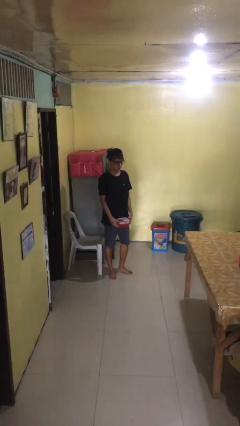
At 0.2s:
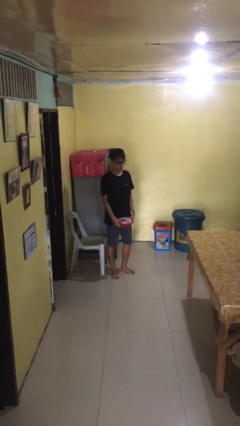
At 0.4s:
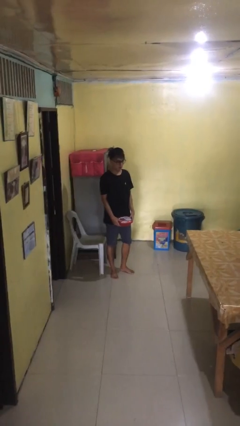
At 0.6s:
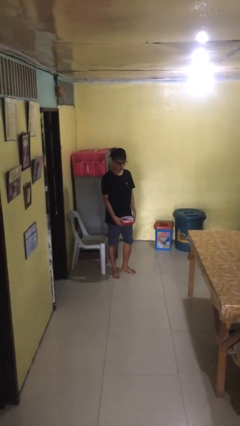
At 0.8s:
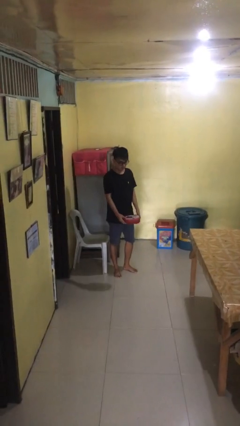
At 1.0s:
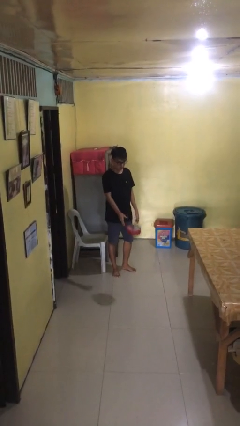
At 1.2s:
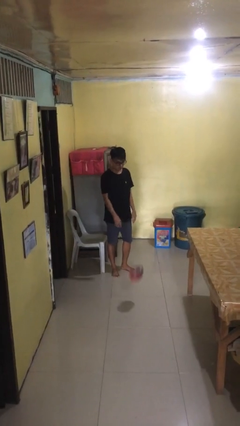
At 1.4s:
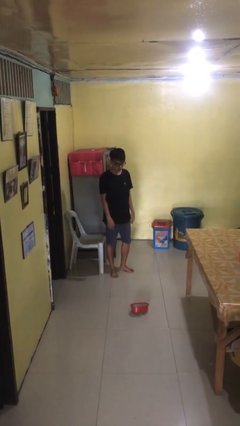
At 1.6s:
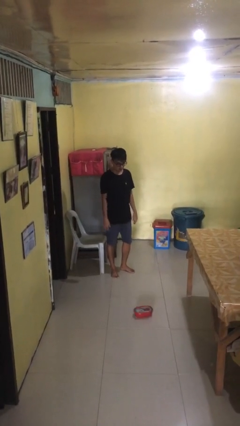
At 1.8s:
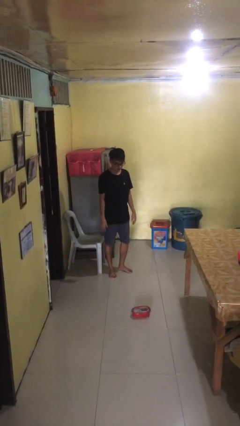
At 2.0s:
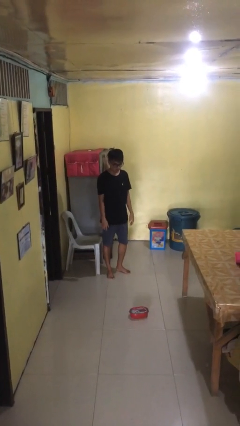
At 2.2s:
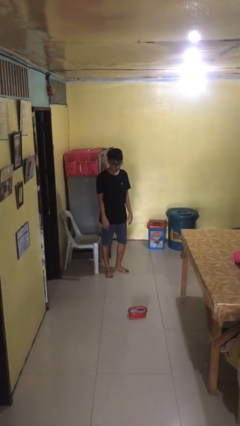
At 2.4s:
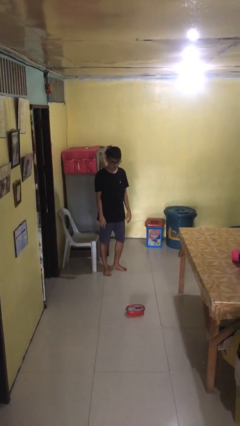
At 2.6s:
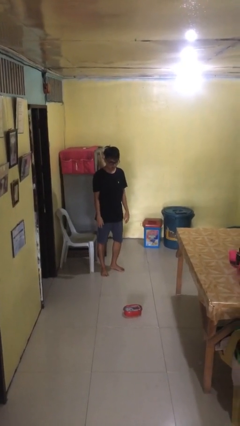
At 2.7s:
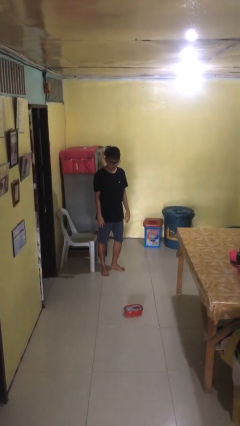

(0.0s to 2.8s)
person throws object to ground

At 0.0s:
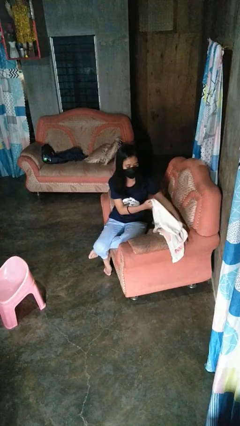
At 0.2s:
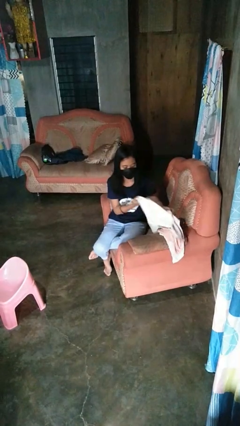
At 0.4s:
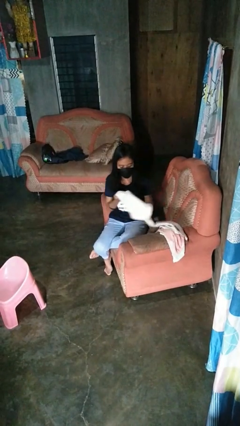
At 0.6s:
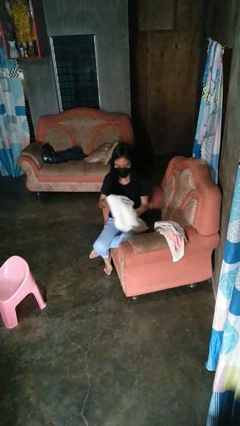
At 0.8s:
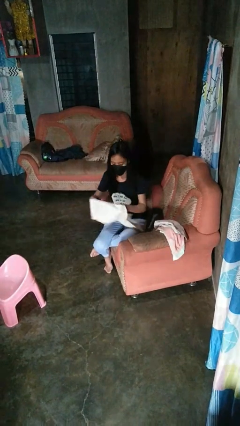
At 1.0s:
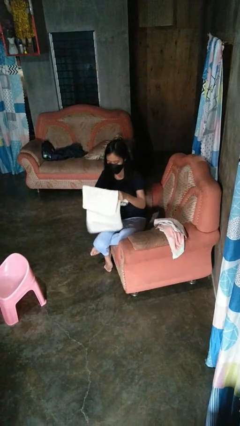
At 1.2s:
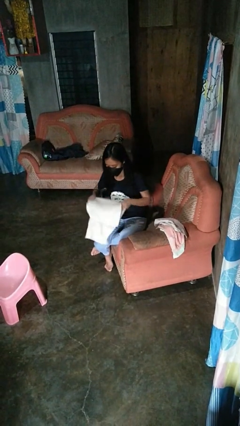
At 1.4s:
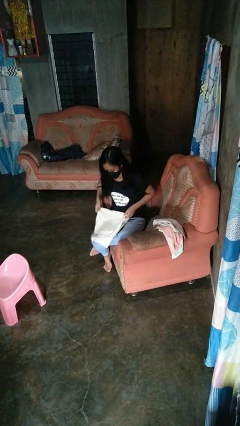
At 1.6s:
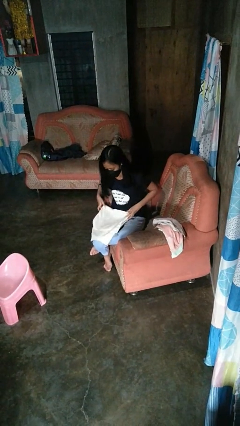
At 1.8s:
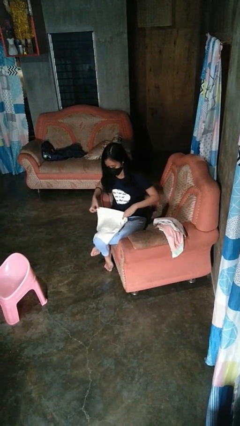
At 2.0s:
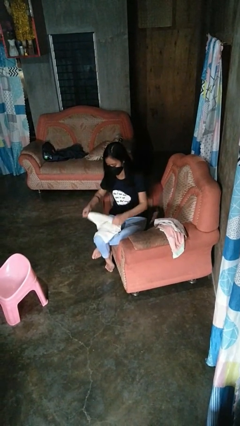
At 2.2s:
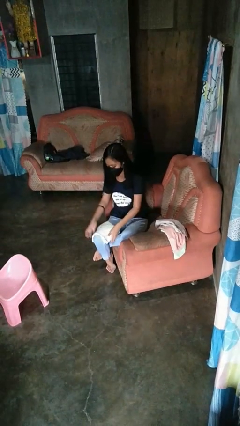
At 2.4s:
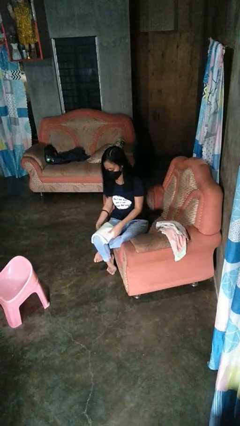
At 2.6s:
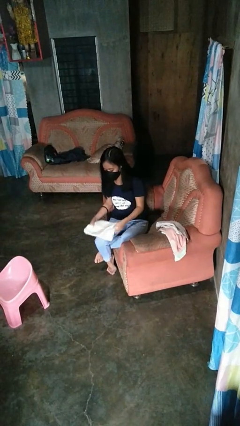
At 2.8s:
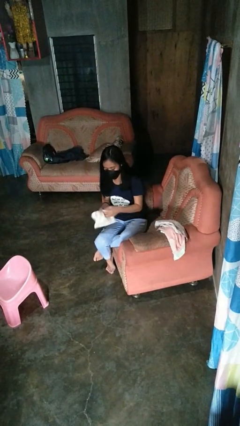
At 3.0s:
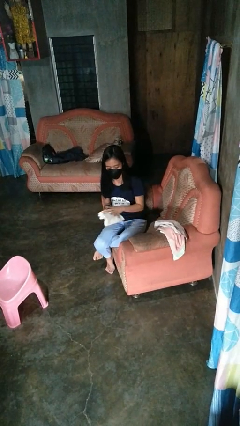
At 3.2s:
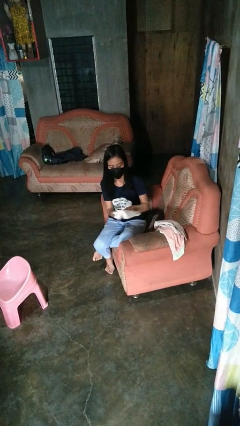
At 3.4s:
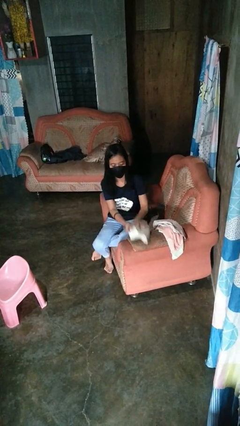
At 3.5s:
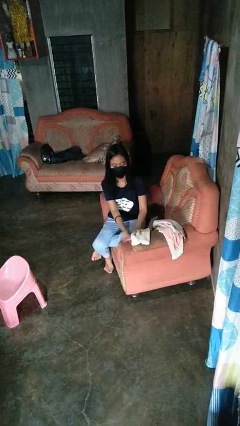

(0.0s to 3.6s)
person folds towel

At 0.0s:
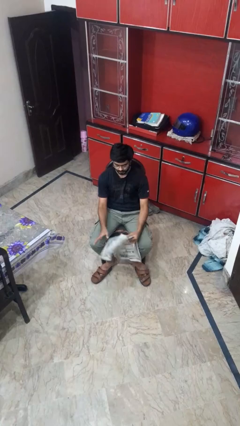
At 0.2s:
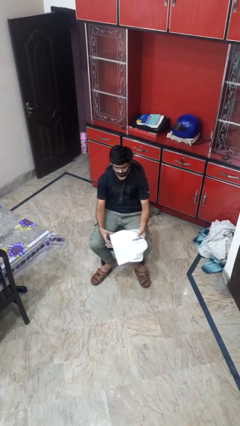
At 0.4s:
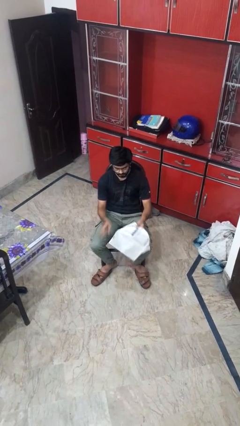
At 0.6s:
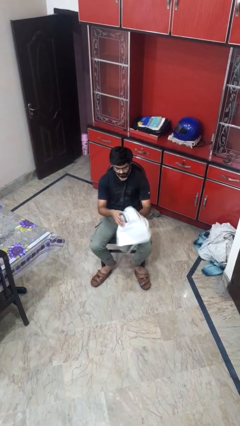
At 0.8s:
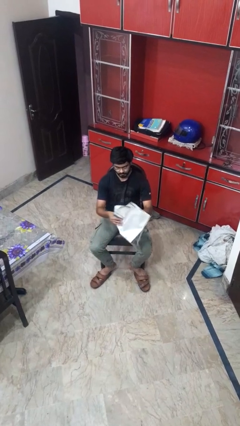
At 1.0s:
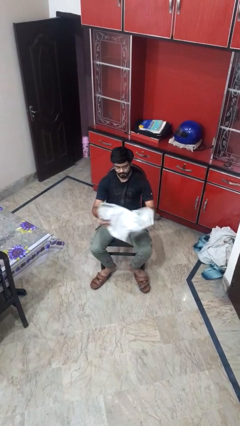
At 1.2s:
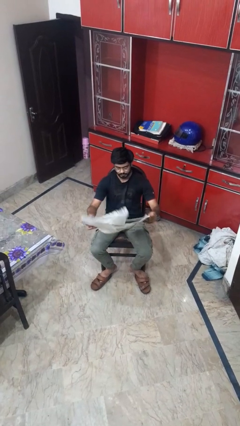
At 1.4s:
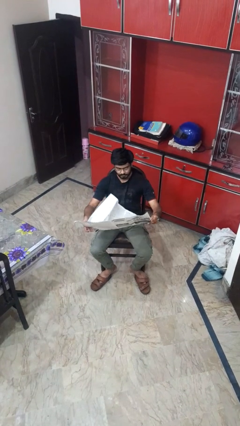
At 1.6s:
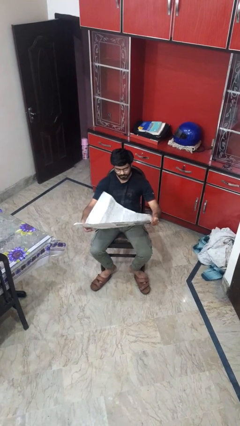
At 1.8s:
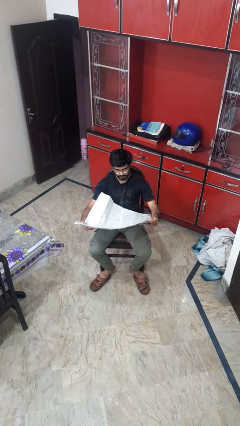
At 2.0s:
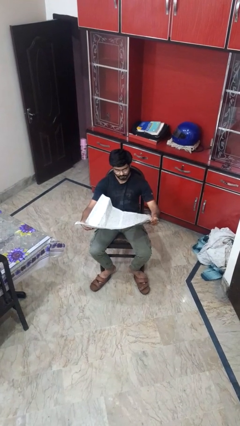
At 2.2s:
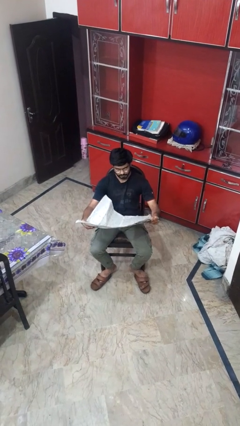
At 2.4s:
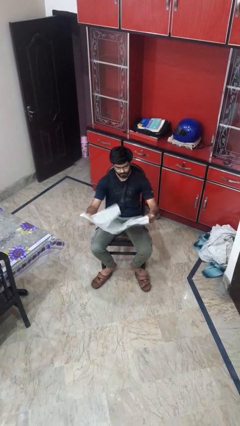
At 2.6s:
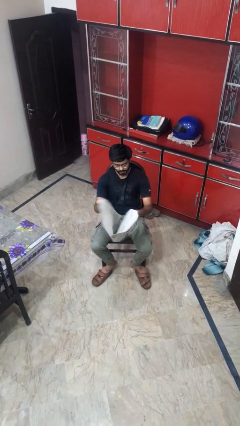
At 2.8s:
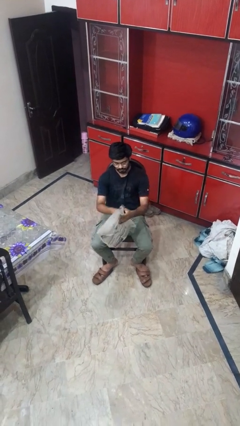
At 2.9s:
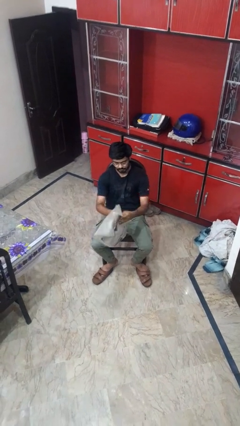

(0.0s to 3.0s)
person reads newspaper

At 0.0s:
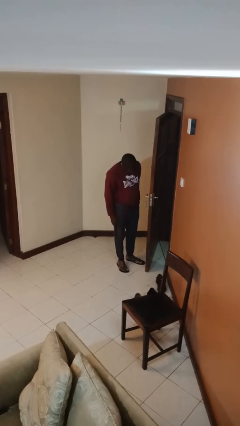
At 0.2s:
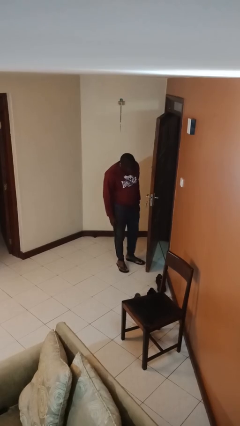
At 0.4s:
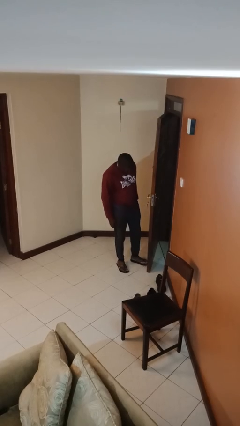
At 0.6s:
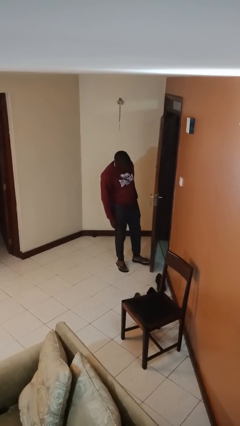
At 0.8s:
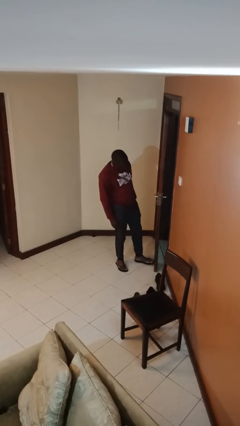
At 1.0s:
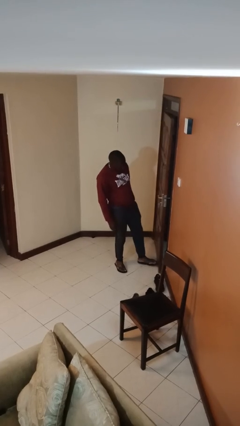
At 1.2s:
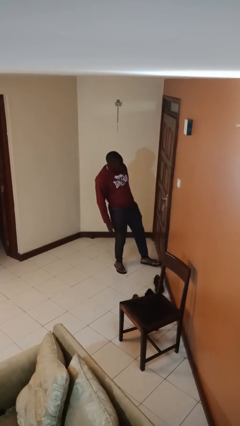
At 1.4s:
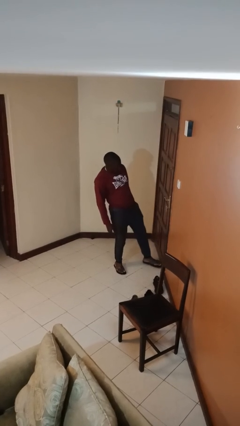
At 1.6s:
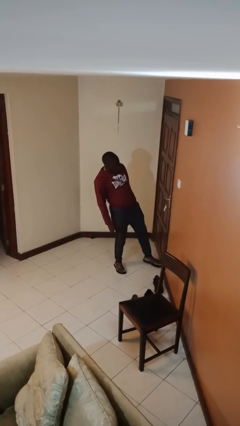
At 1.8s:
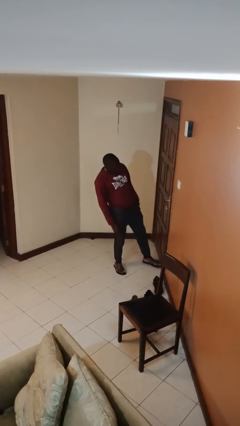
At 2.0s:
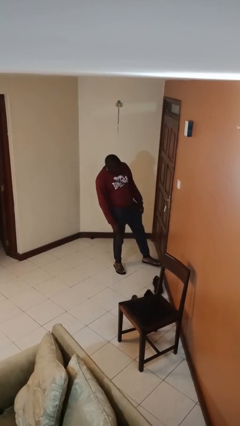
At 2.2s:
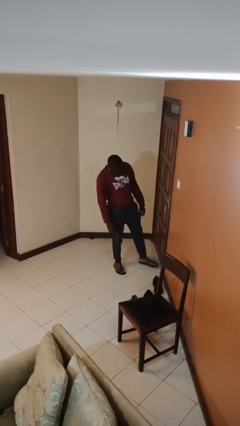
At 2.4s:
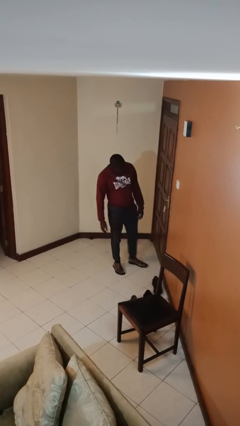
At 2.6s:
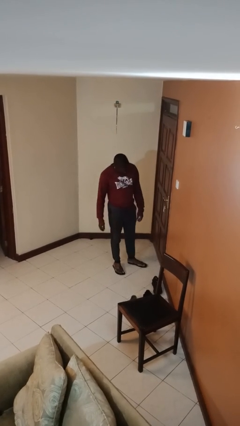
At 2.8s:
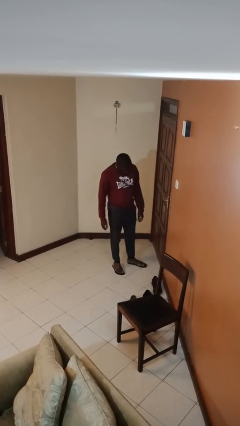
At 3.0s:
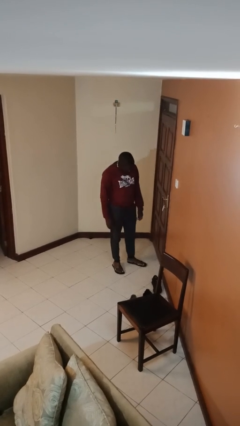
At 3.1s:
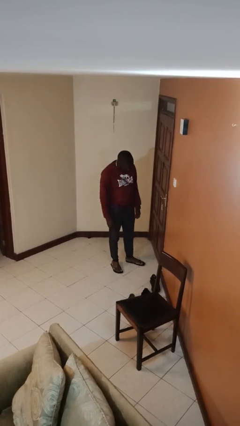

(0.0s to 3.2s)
person closes door with foot

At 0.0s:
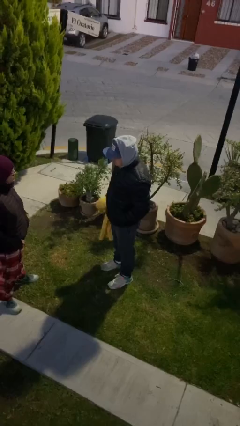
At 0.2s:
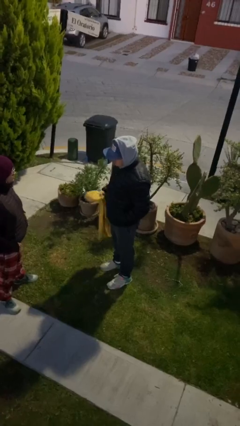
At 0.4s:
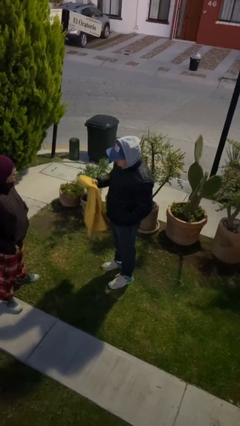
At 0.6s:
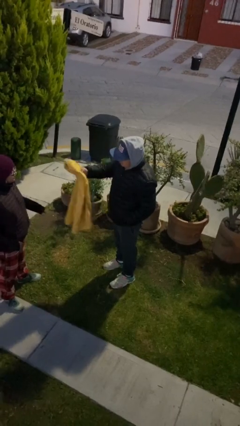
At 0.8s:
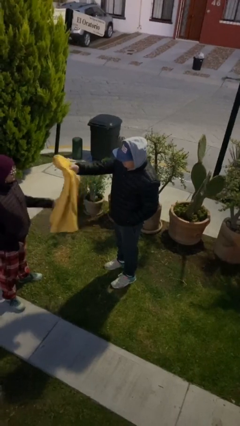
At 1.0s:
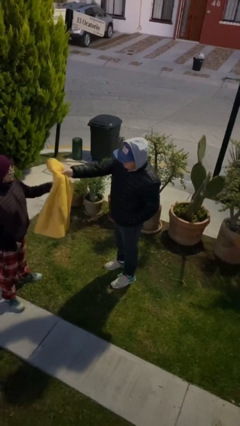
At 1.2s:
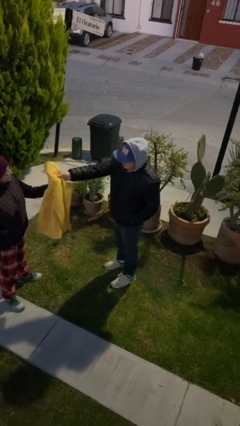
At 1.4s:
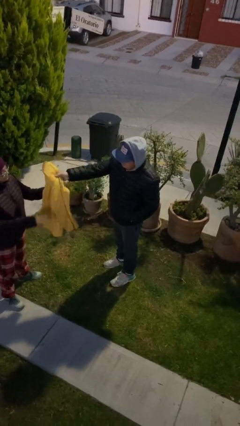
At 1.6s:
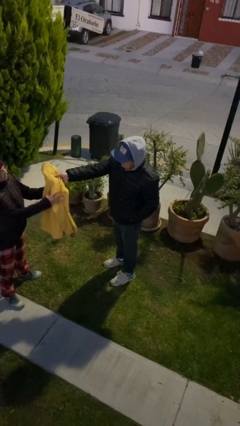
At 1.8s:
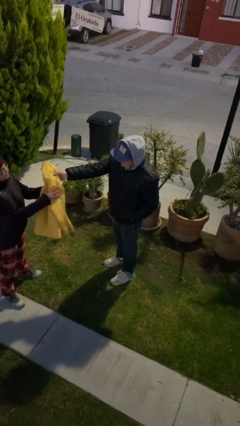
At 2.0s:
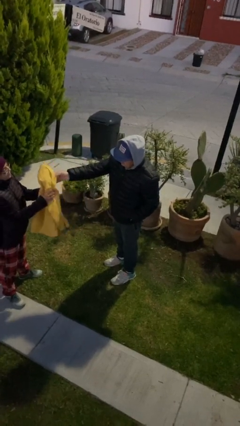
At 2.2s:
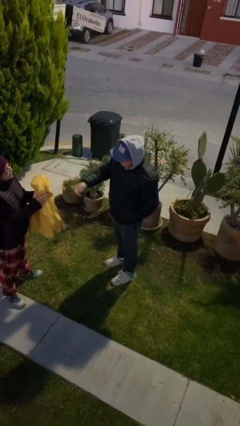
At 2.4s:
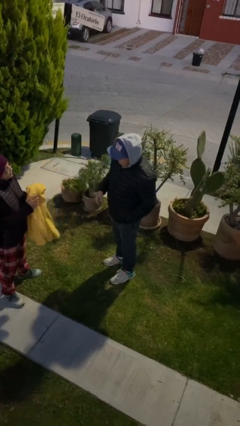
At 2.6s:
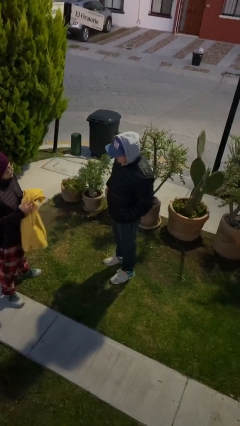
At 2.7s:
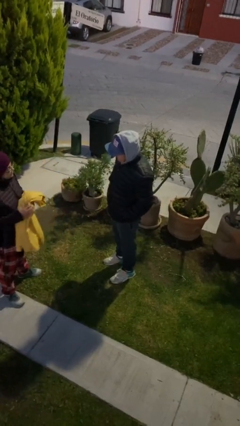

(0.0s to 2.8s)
person transfers object to person

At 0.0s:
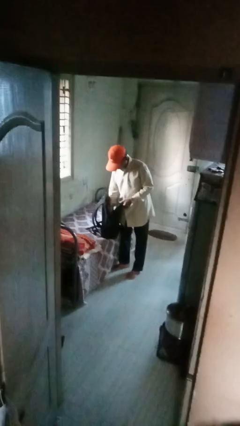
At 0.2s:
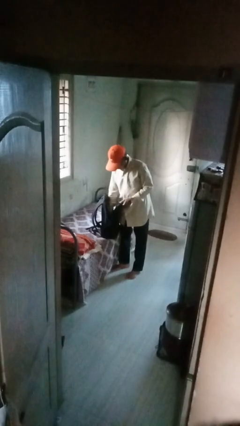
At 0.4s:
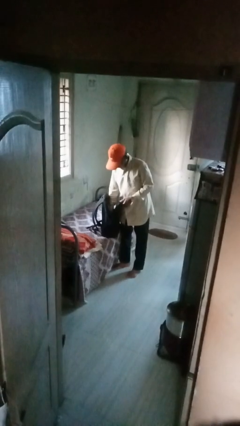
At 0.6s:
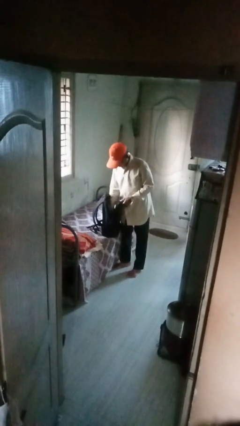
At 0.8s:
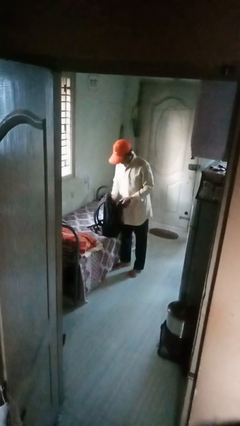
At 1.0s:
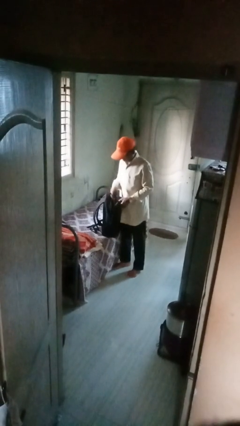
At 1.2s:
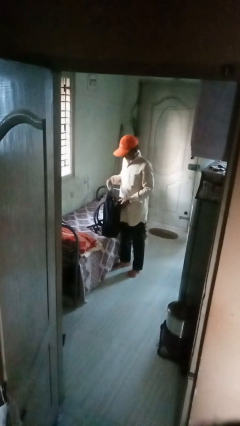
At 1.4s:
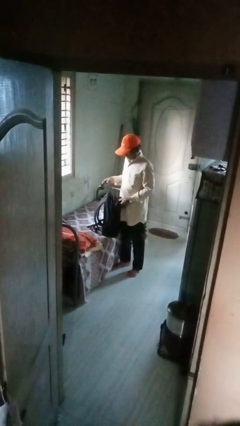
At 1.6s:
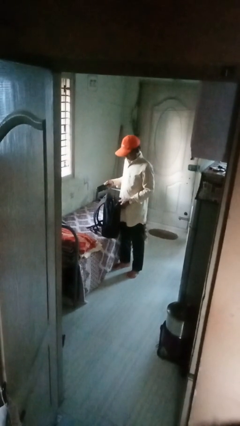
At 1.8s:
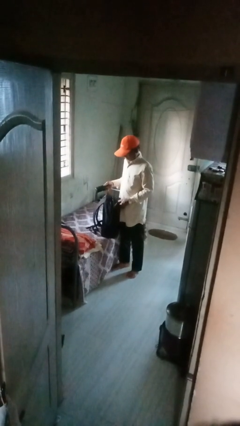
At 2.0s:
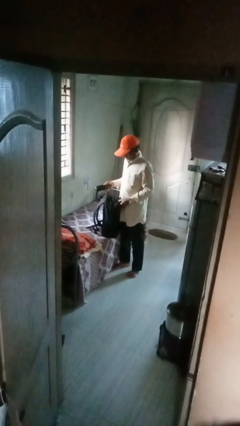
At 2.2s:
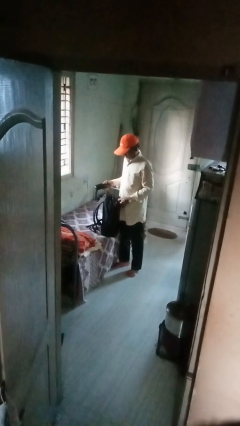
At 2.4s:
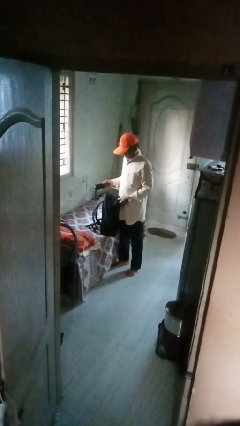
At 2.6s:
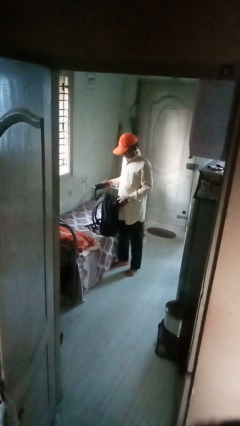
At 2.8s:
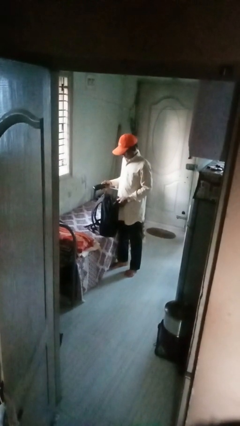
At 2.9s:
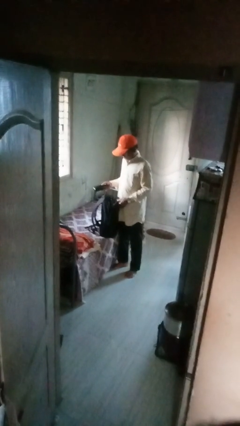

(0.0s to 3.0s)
person takes object from backpack
